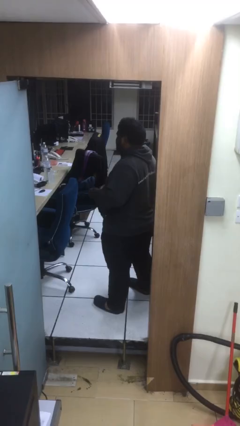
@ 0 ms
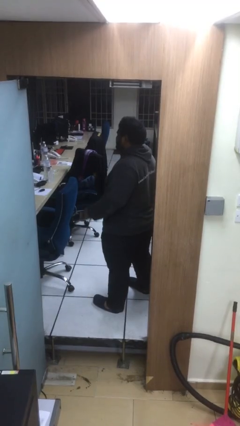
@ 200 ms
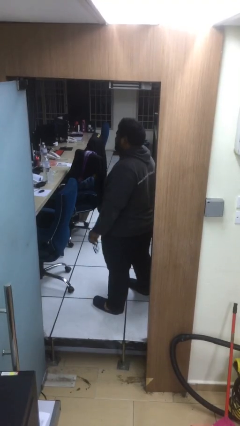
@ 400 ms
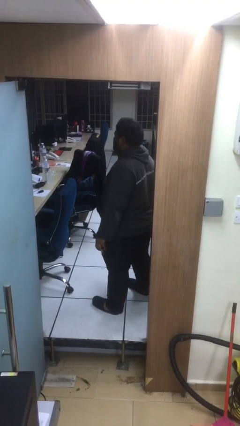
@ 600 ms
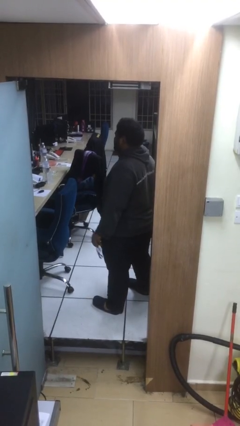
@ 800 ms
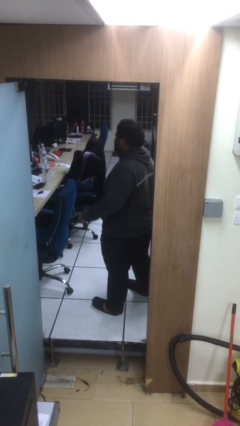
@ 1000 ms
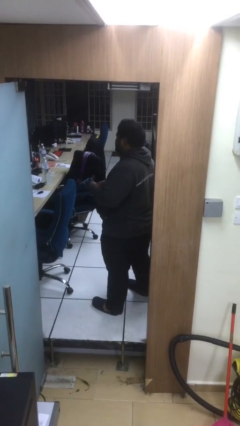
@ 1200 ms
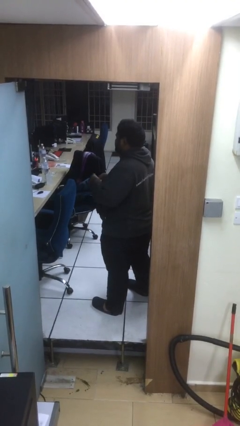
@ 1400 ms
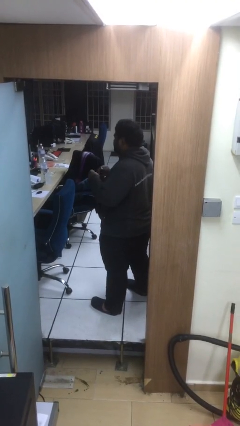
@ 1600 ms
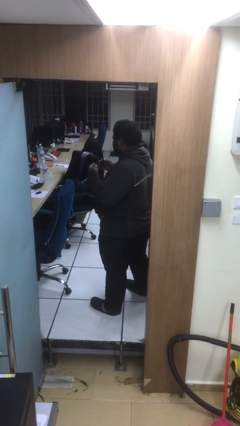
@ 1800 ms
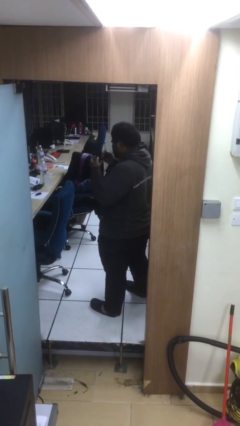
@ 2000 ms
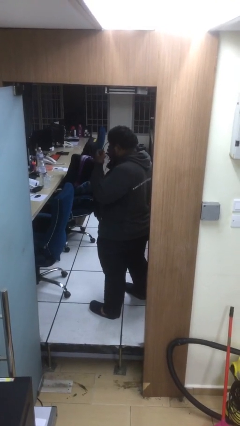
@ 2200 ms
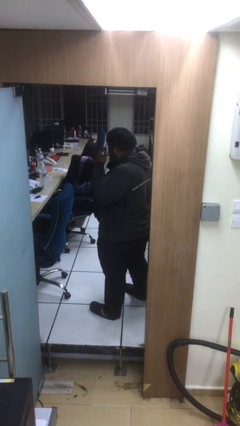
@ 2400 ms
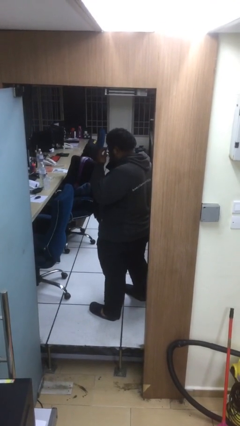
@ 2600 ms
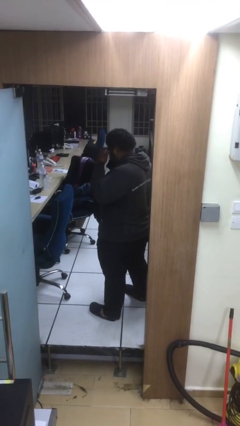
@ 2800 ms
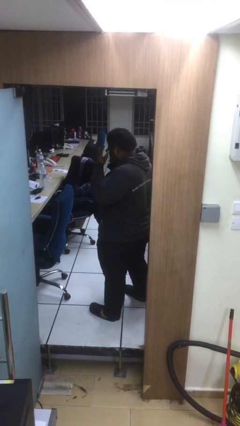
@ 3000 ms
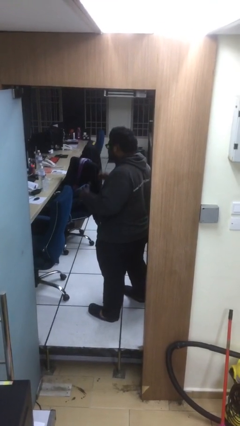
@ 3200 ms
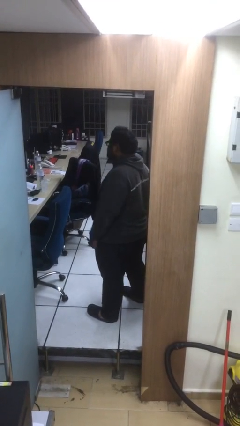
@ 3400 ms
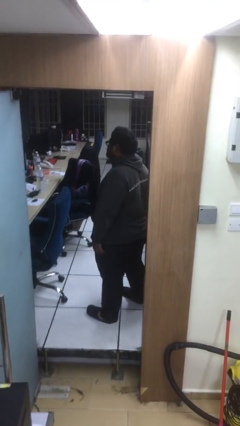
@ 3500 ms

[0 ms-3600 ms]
person puts on glasses

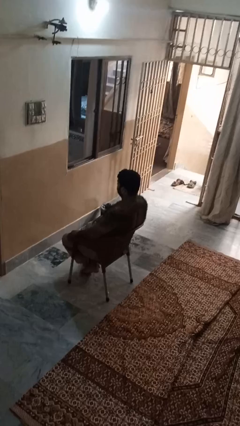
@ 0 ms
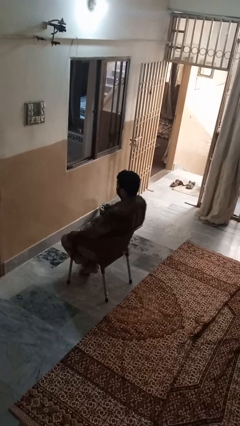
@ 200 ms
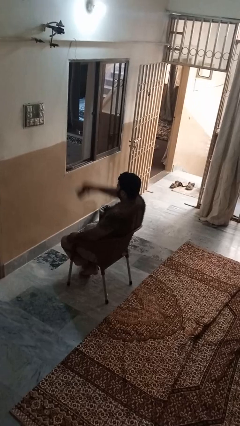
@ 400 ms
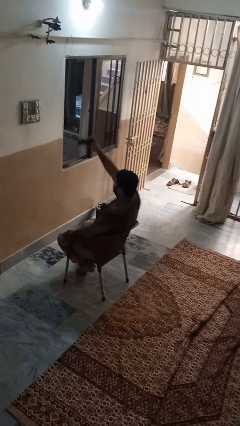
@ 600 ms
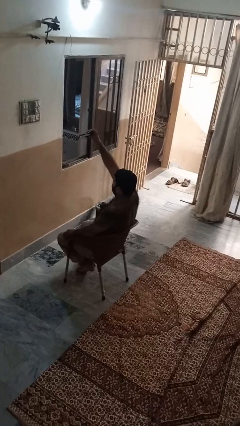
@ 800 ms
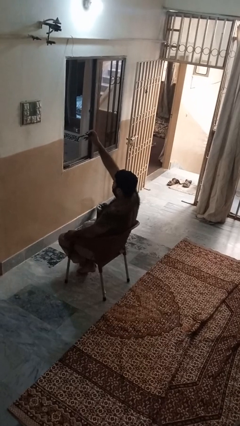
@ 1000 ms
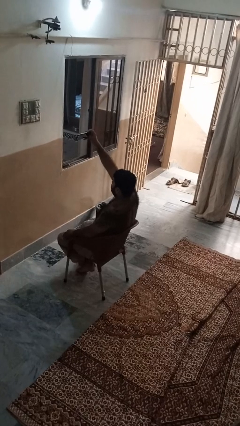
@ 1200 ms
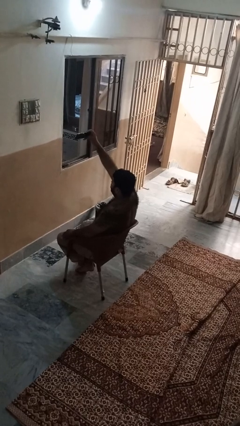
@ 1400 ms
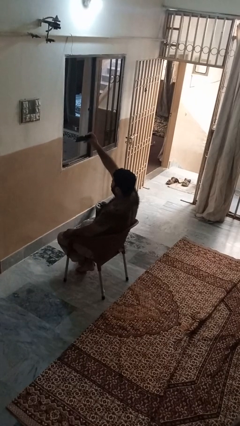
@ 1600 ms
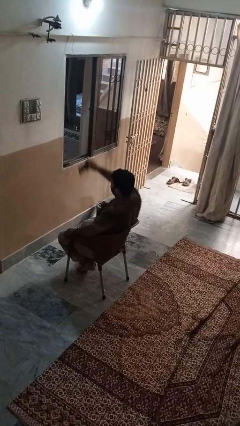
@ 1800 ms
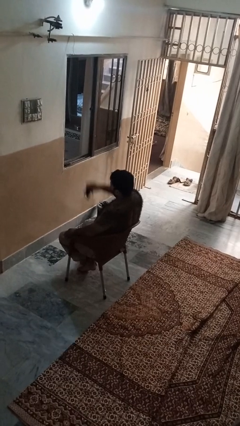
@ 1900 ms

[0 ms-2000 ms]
person takes selfie

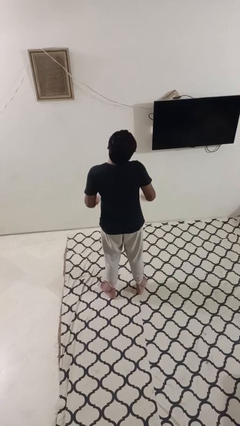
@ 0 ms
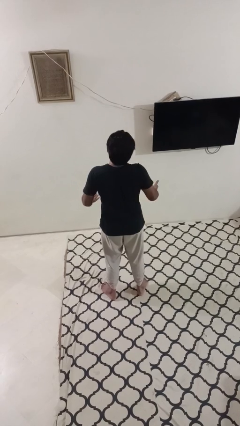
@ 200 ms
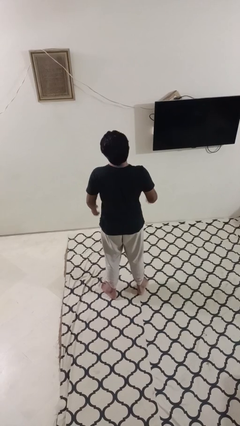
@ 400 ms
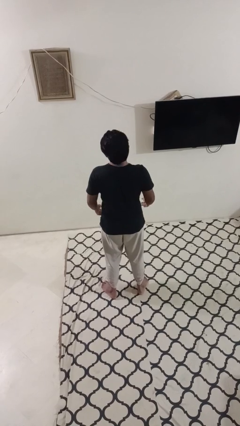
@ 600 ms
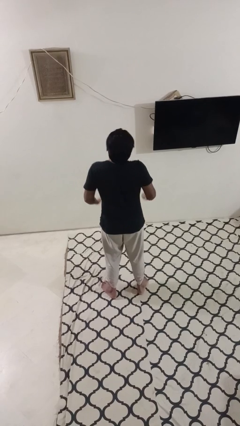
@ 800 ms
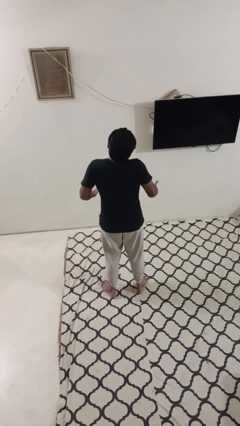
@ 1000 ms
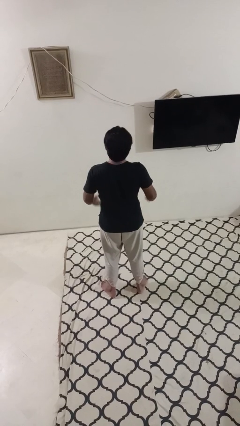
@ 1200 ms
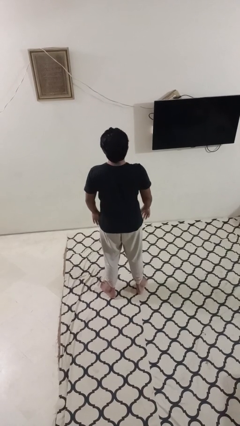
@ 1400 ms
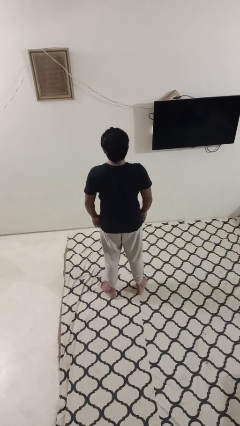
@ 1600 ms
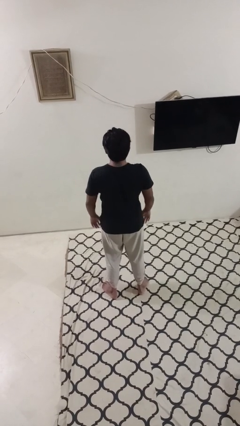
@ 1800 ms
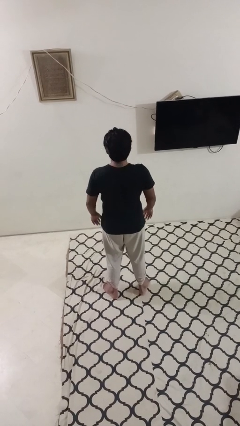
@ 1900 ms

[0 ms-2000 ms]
person shrugs

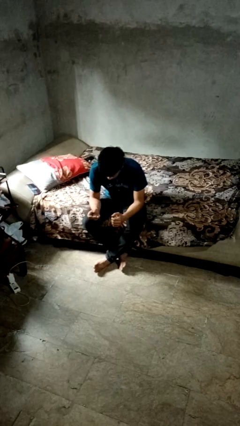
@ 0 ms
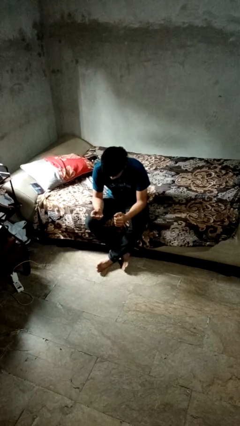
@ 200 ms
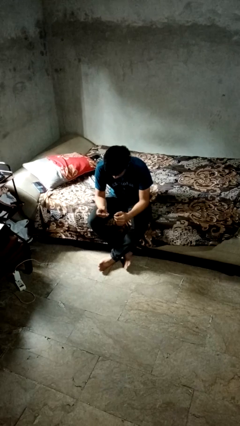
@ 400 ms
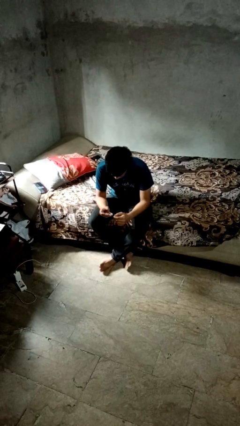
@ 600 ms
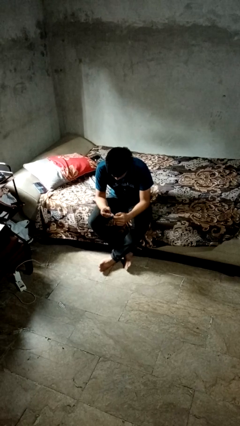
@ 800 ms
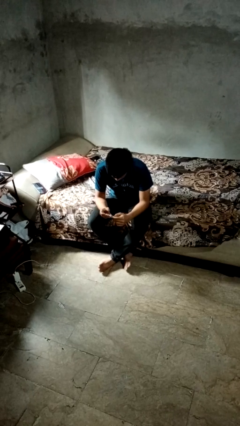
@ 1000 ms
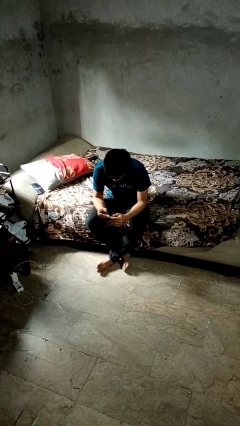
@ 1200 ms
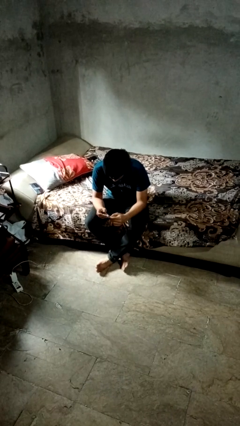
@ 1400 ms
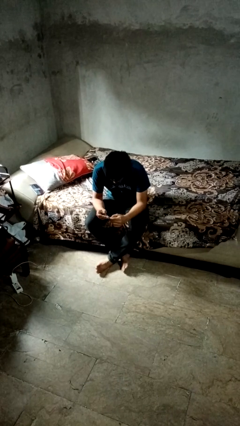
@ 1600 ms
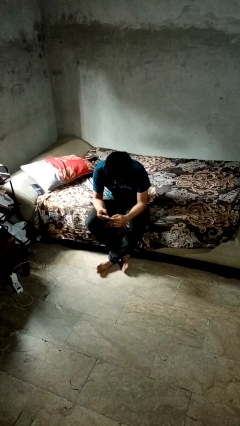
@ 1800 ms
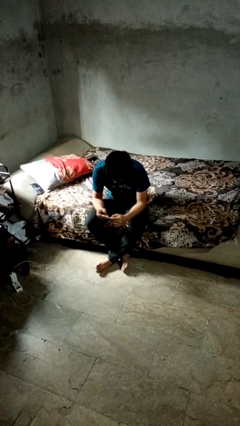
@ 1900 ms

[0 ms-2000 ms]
person clips fingernails

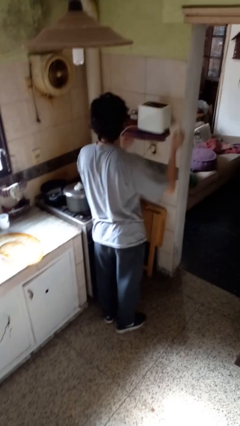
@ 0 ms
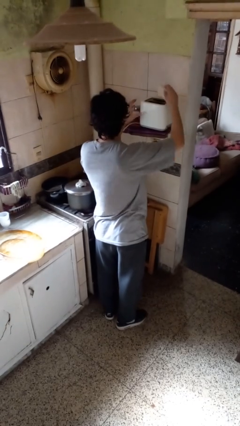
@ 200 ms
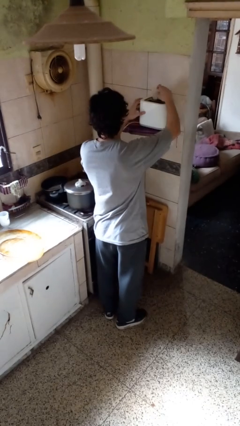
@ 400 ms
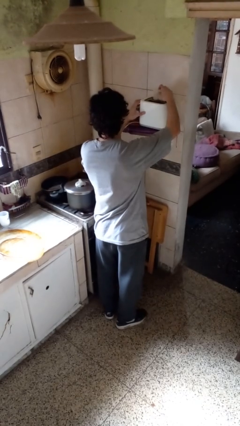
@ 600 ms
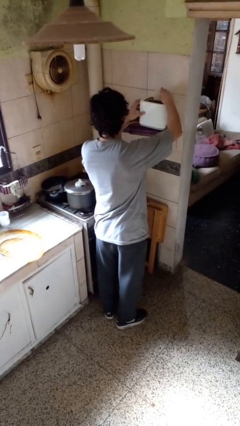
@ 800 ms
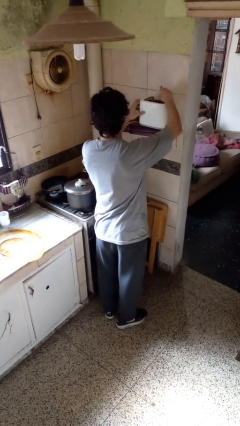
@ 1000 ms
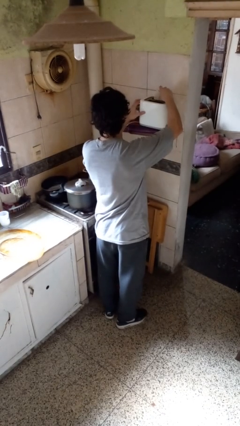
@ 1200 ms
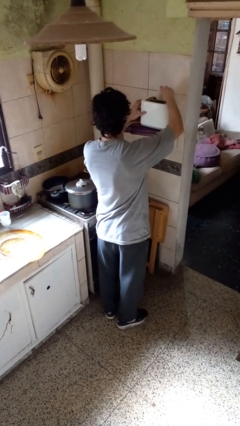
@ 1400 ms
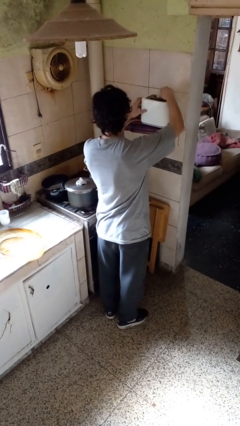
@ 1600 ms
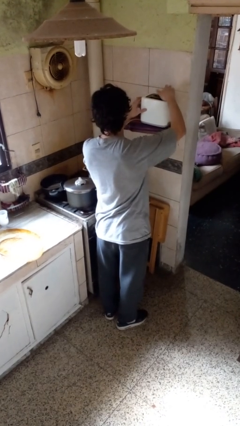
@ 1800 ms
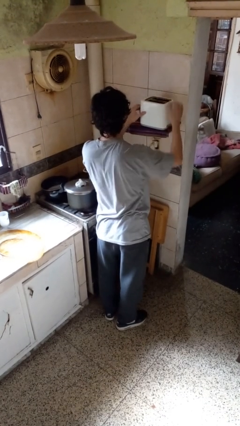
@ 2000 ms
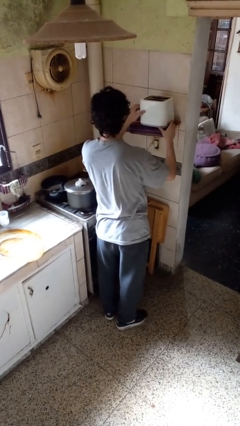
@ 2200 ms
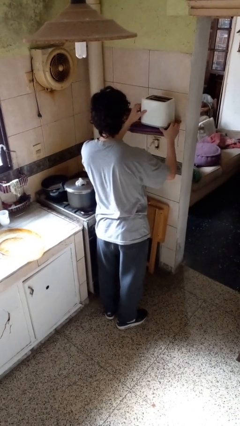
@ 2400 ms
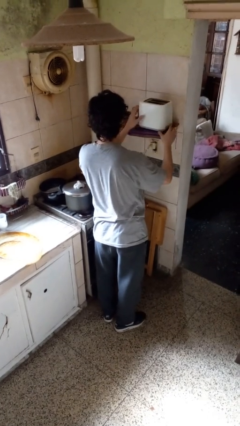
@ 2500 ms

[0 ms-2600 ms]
person puts object into toaster

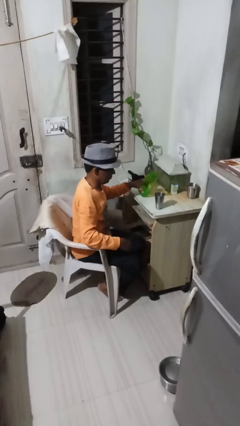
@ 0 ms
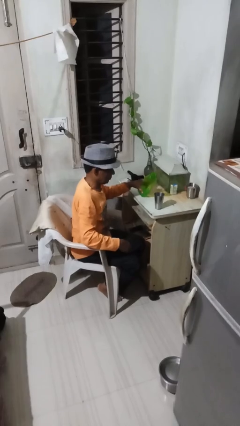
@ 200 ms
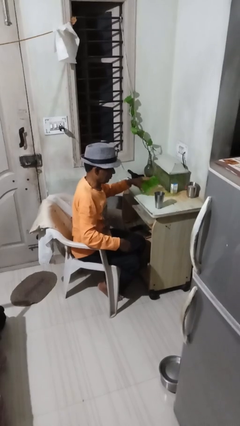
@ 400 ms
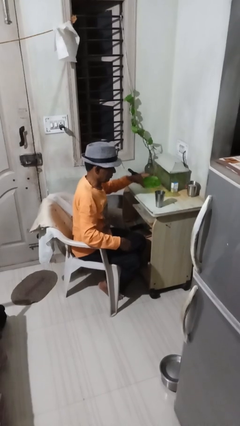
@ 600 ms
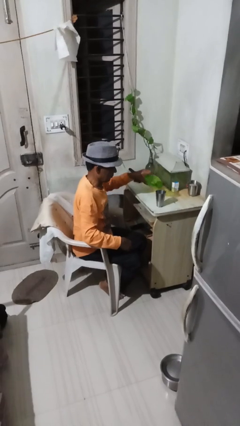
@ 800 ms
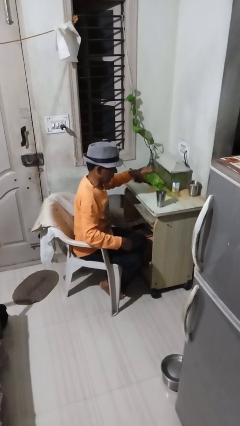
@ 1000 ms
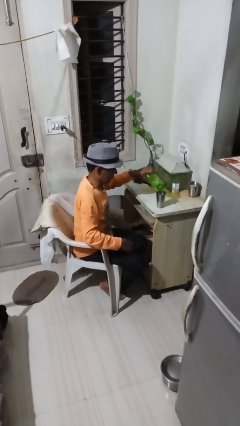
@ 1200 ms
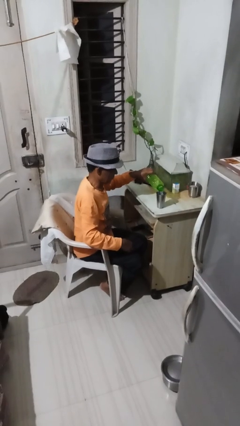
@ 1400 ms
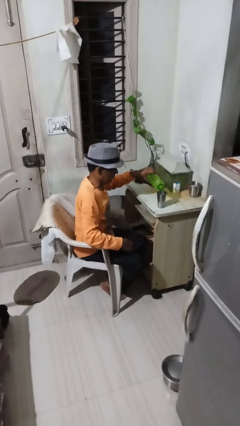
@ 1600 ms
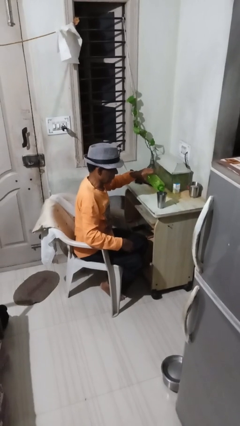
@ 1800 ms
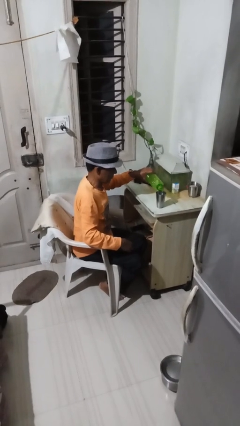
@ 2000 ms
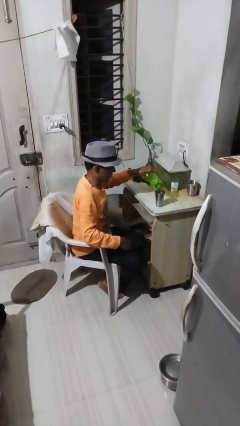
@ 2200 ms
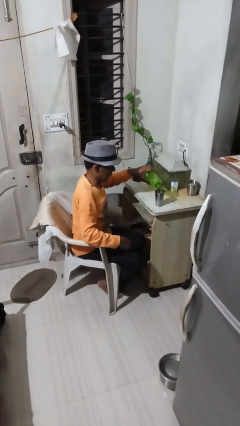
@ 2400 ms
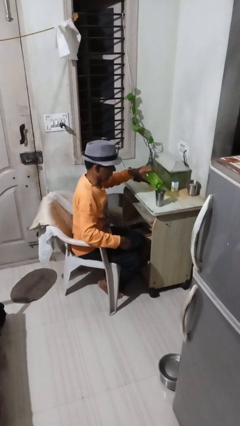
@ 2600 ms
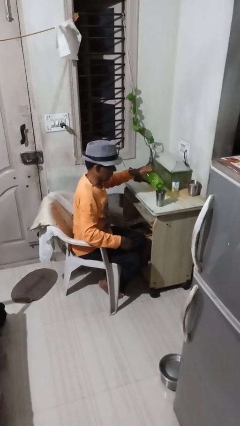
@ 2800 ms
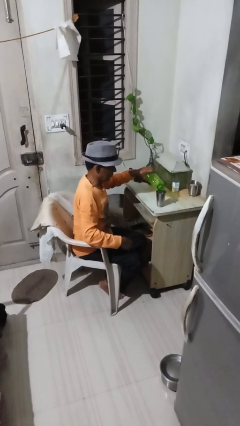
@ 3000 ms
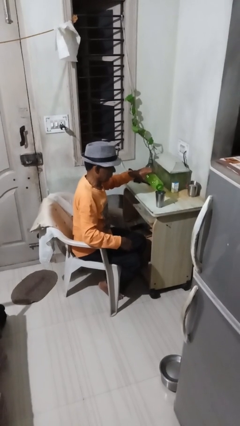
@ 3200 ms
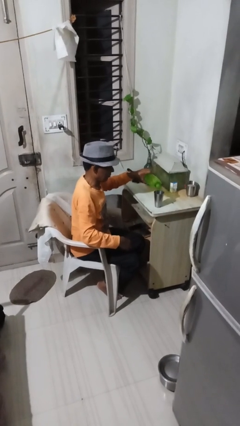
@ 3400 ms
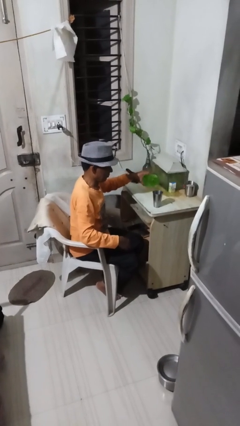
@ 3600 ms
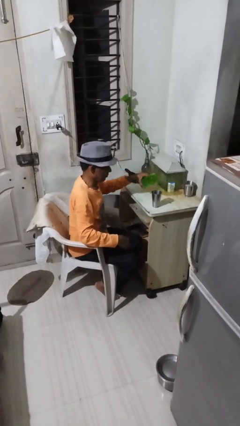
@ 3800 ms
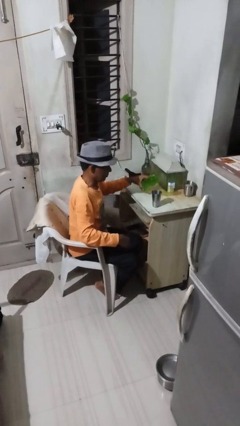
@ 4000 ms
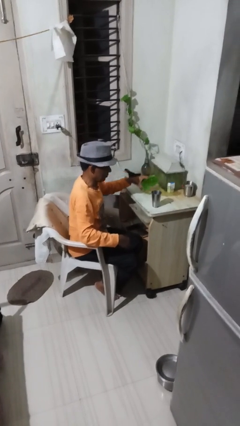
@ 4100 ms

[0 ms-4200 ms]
person pours liquid into cup

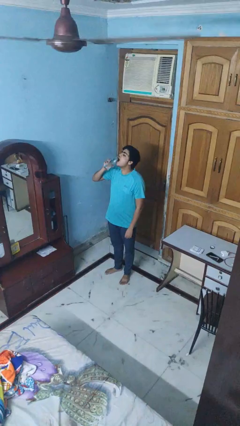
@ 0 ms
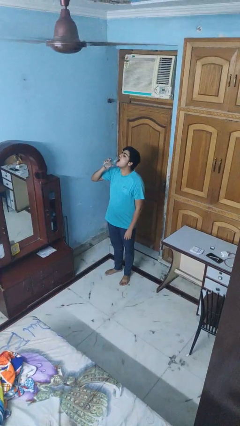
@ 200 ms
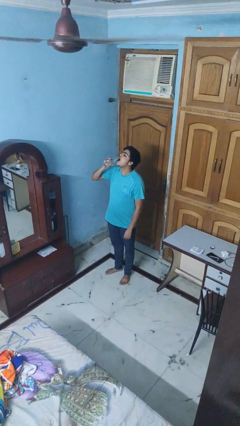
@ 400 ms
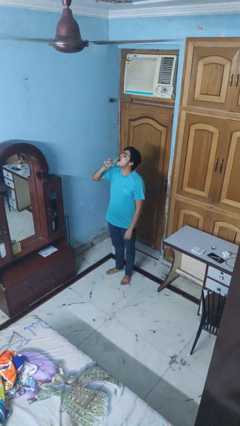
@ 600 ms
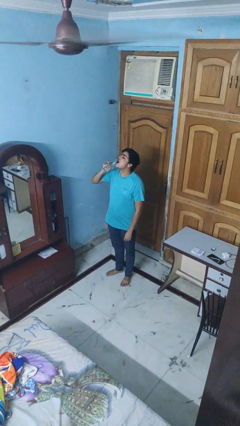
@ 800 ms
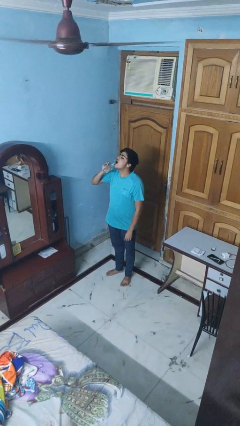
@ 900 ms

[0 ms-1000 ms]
person drinks from bottle

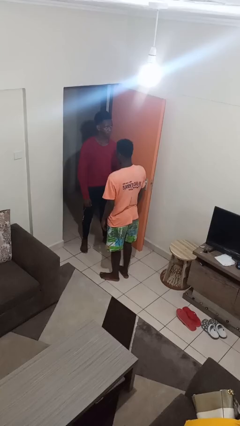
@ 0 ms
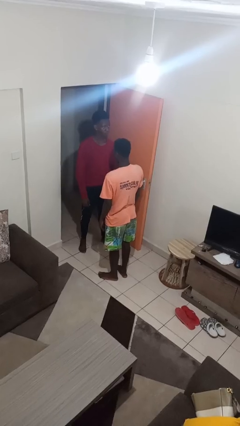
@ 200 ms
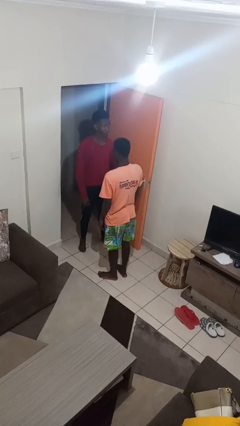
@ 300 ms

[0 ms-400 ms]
person picks up person
